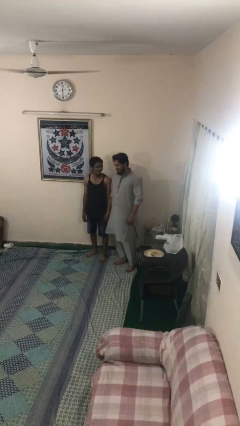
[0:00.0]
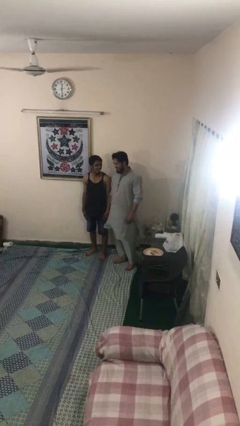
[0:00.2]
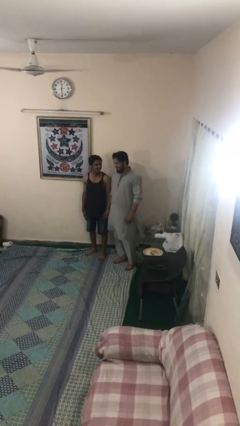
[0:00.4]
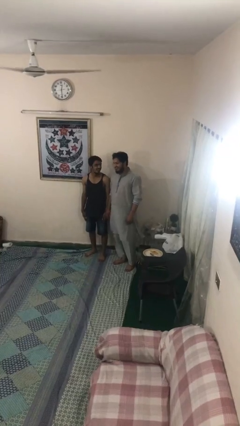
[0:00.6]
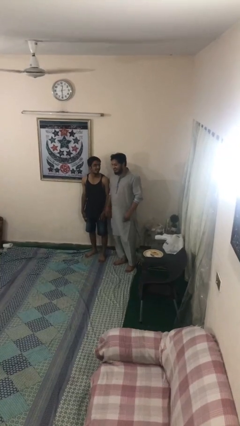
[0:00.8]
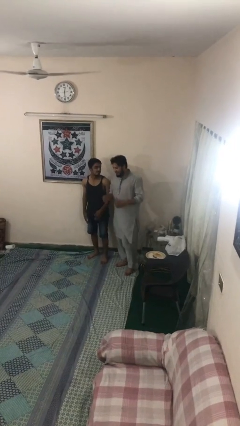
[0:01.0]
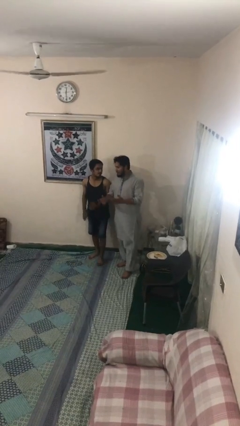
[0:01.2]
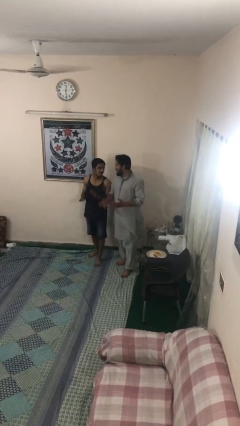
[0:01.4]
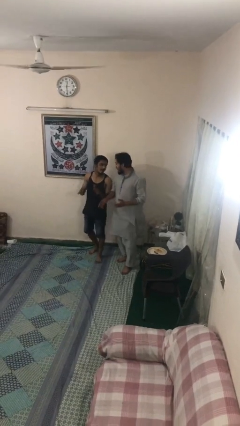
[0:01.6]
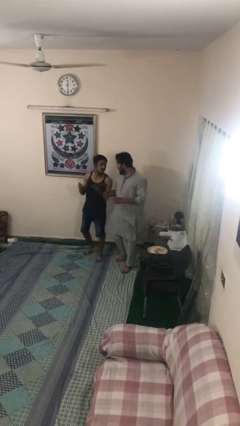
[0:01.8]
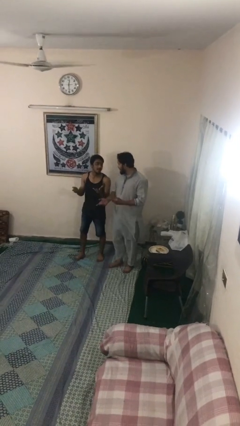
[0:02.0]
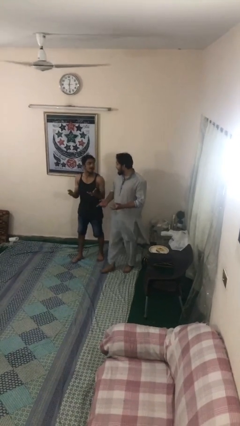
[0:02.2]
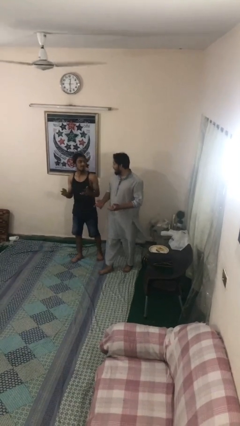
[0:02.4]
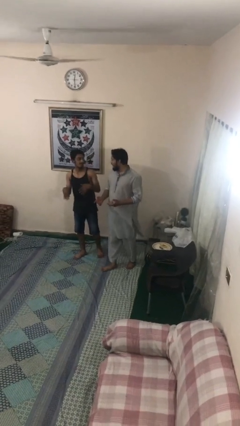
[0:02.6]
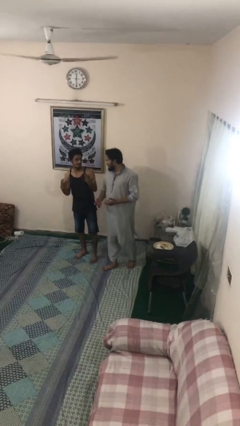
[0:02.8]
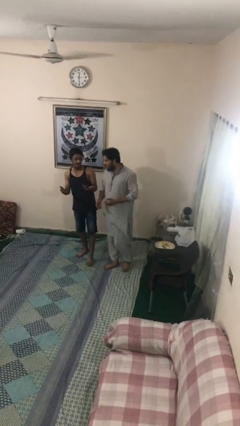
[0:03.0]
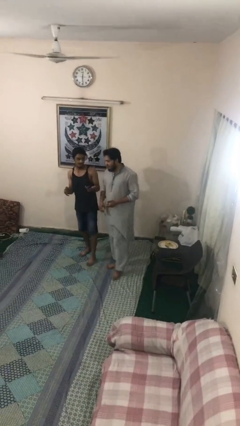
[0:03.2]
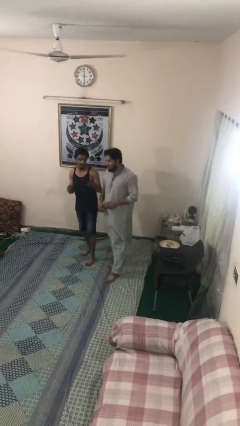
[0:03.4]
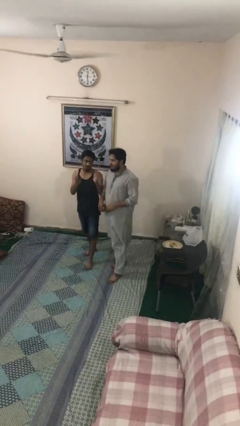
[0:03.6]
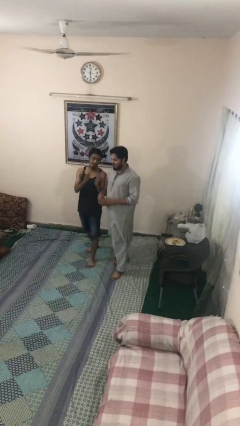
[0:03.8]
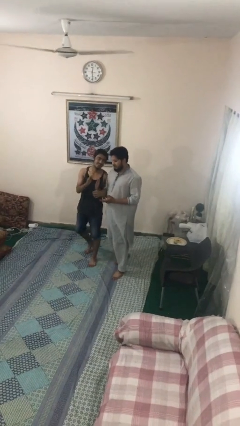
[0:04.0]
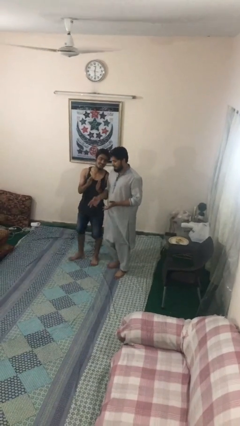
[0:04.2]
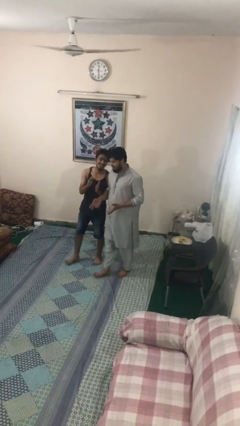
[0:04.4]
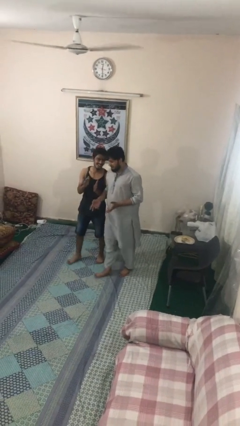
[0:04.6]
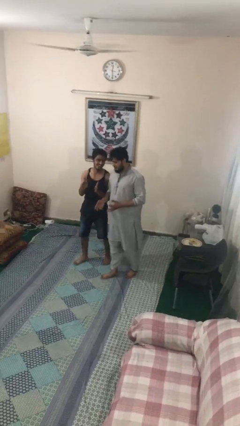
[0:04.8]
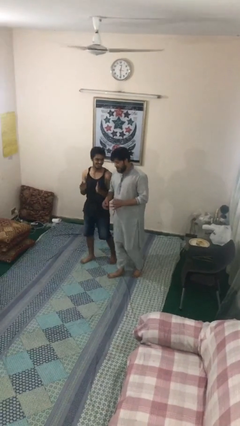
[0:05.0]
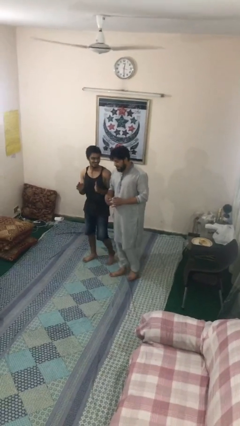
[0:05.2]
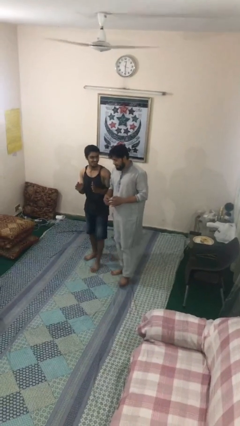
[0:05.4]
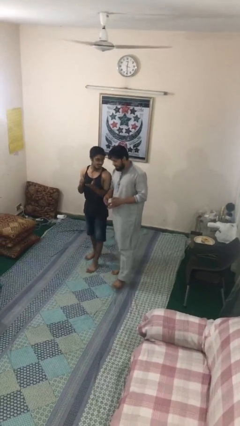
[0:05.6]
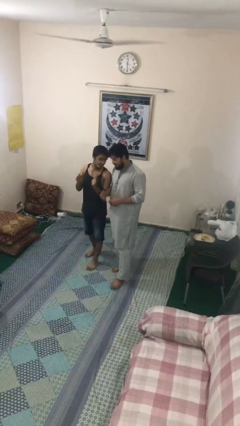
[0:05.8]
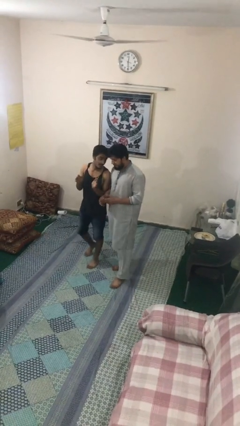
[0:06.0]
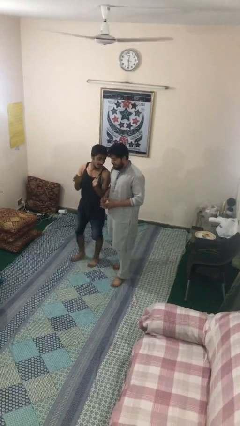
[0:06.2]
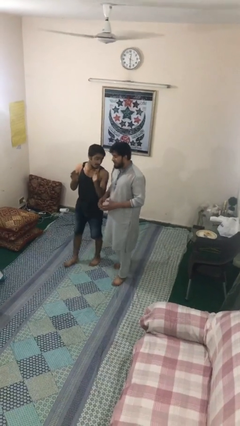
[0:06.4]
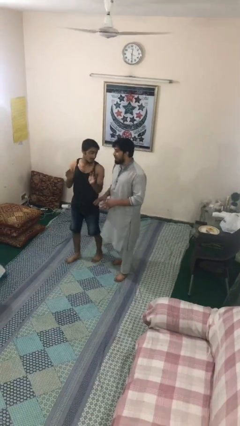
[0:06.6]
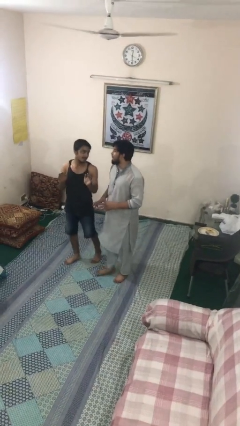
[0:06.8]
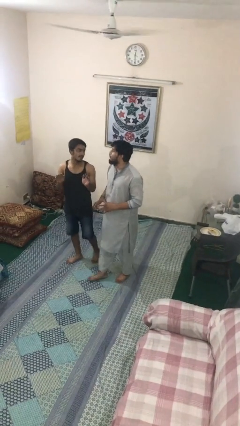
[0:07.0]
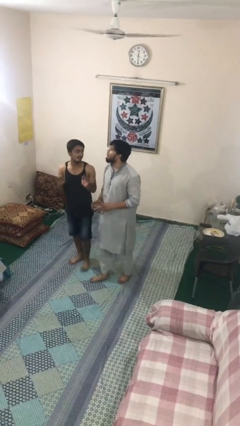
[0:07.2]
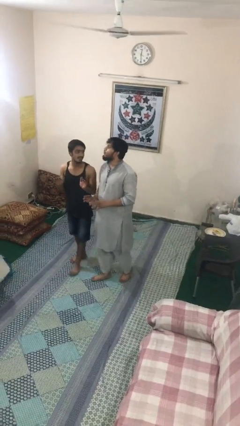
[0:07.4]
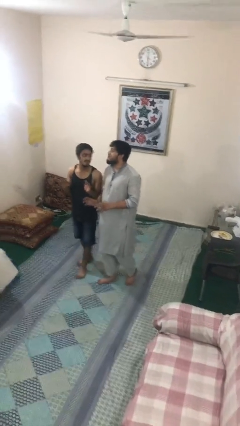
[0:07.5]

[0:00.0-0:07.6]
person talks to person

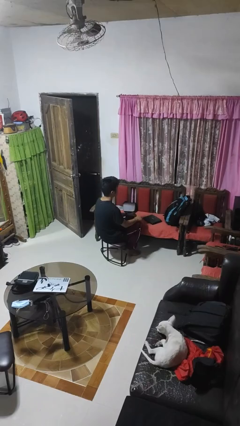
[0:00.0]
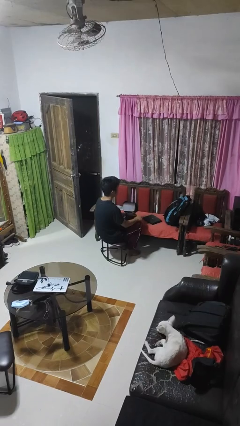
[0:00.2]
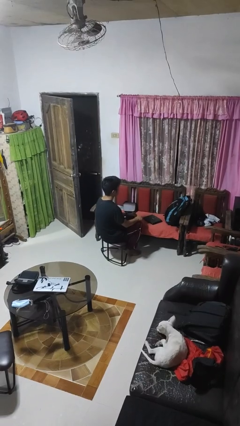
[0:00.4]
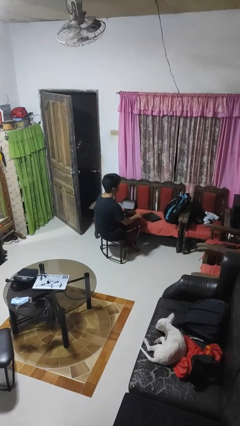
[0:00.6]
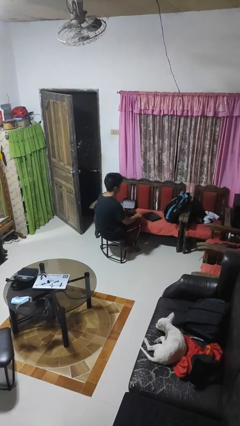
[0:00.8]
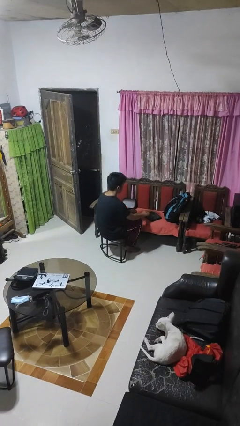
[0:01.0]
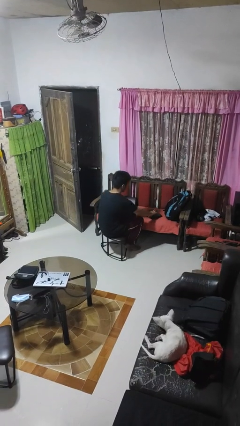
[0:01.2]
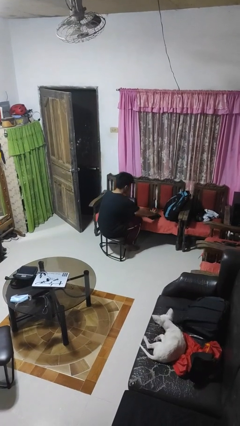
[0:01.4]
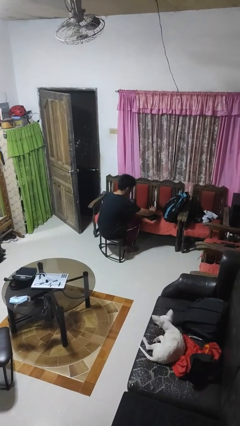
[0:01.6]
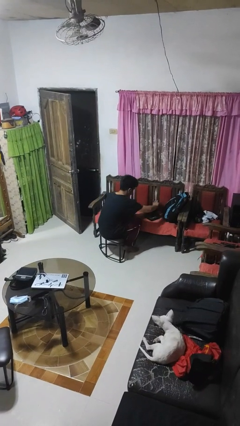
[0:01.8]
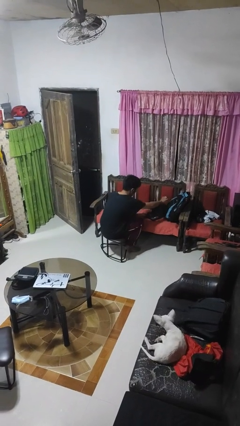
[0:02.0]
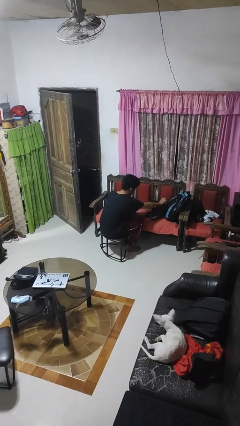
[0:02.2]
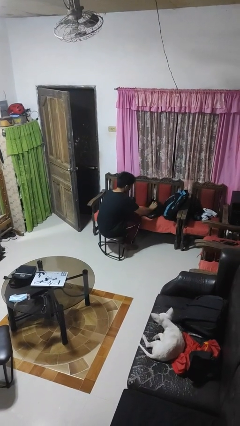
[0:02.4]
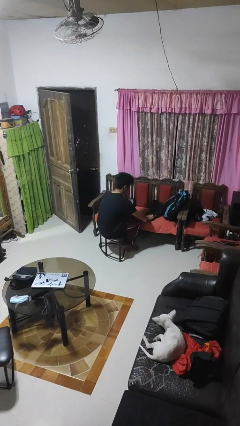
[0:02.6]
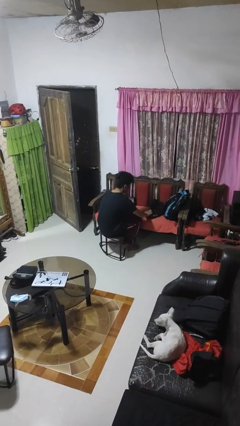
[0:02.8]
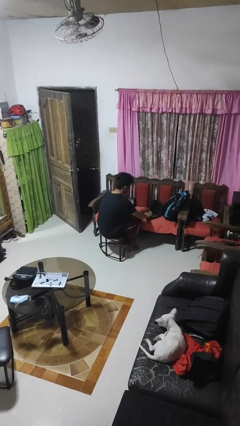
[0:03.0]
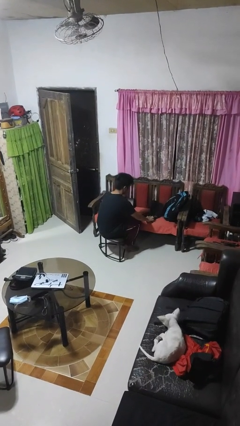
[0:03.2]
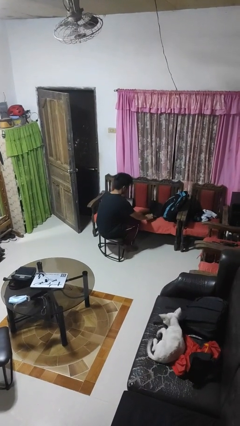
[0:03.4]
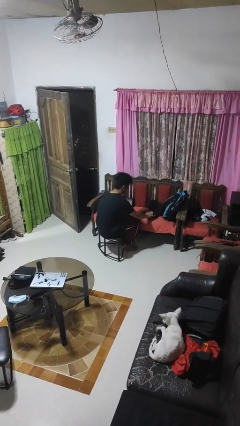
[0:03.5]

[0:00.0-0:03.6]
person opens laptop

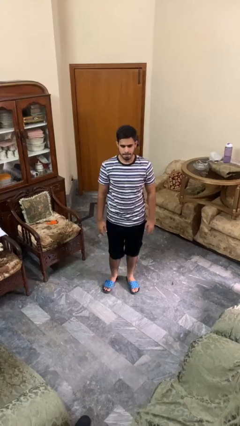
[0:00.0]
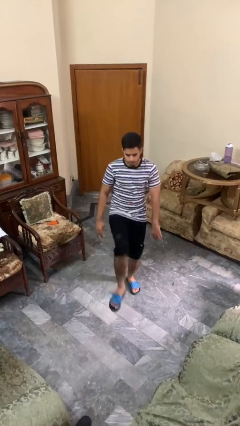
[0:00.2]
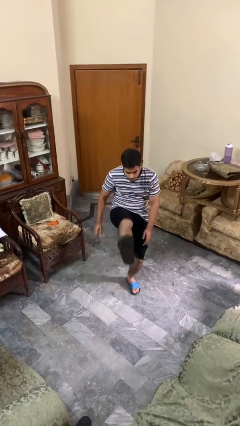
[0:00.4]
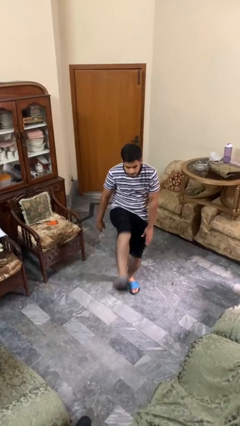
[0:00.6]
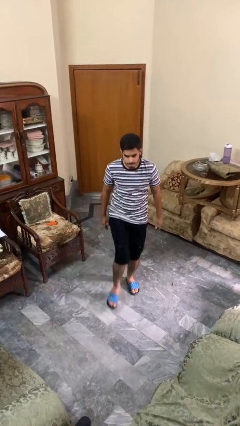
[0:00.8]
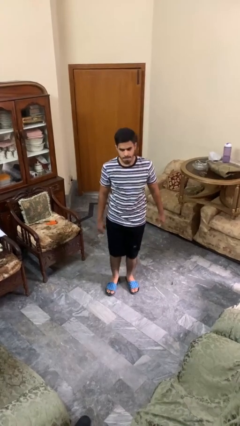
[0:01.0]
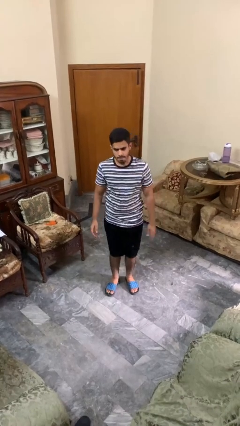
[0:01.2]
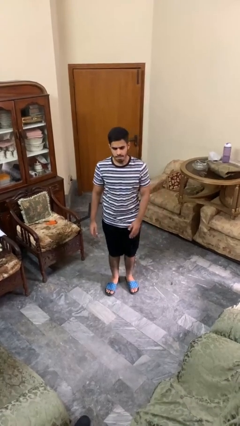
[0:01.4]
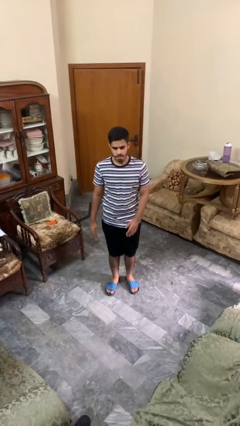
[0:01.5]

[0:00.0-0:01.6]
person karate kicks

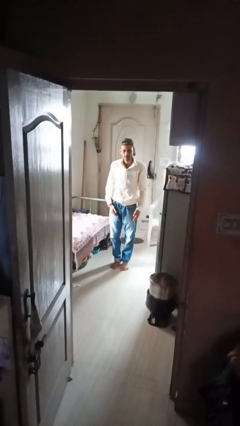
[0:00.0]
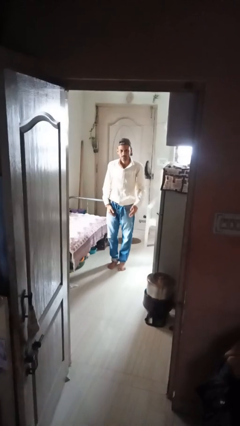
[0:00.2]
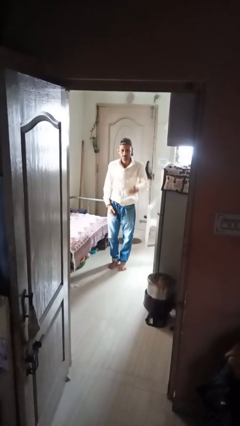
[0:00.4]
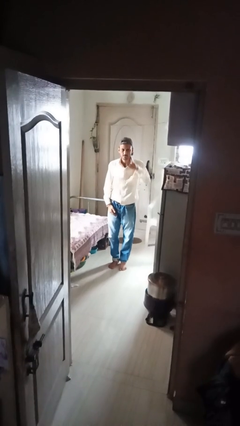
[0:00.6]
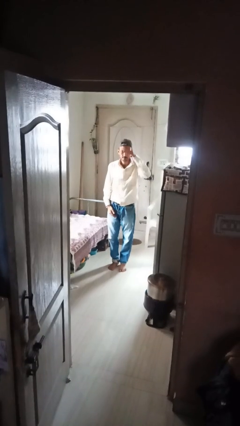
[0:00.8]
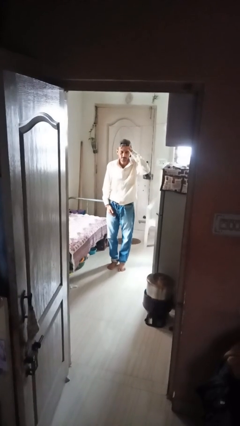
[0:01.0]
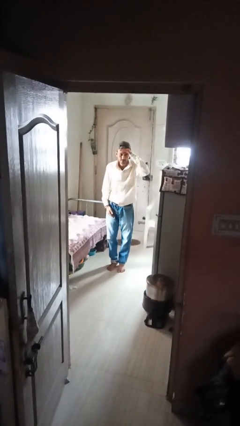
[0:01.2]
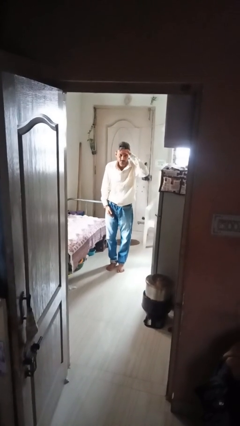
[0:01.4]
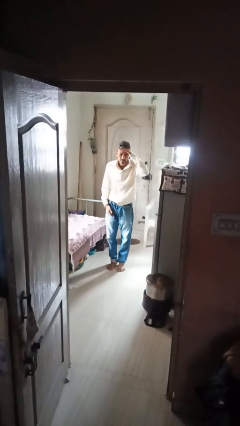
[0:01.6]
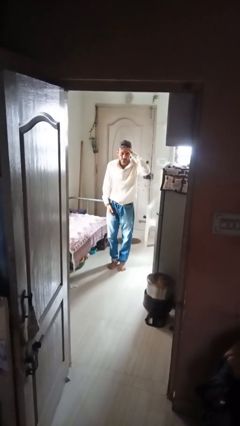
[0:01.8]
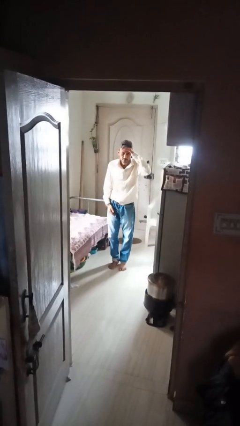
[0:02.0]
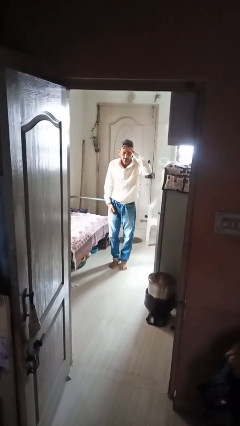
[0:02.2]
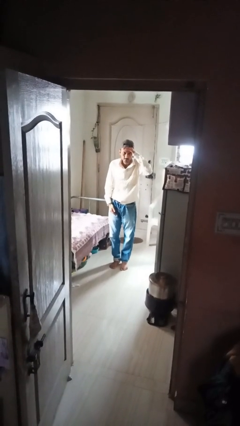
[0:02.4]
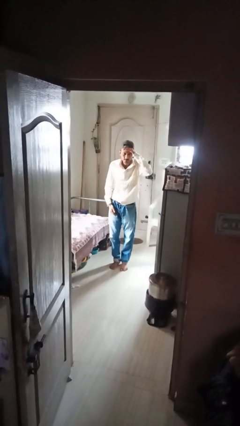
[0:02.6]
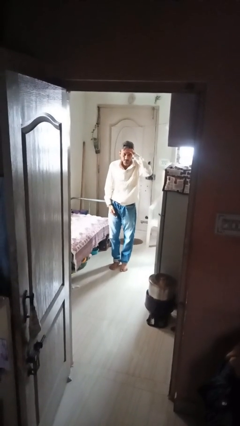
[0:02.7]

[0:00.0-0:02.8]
person shades eyes

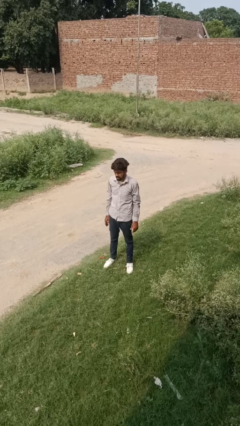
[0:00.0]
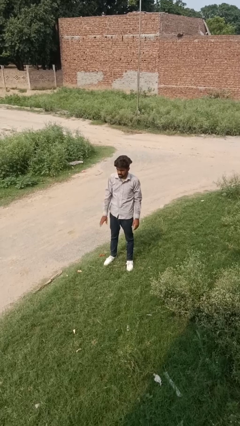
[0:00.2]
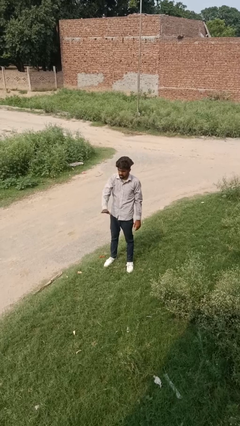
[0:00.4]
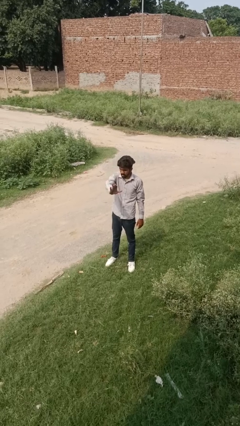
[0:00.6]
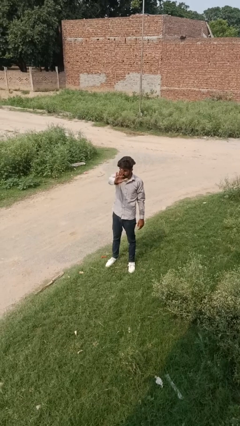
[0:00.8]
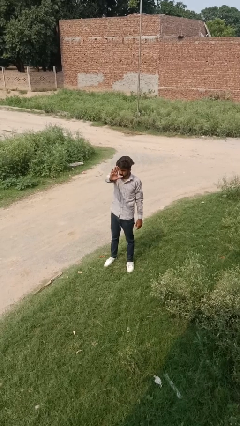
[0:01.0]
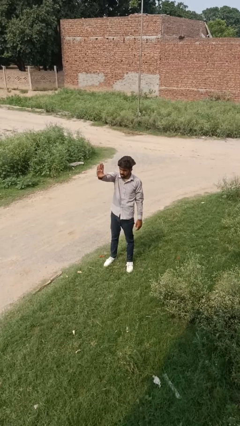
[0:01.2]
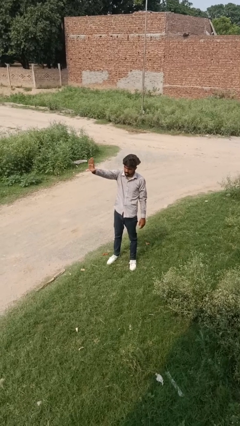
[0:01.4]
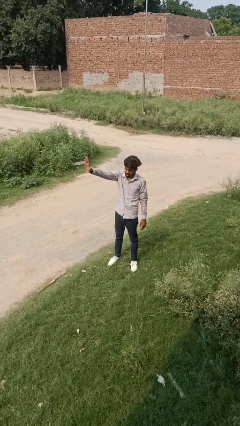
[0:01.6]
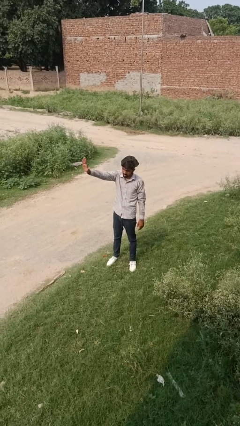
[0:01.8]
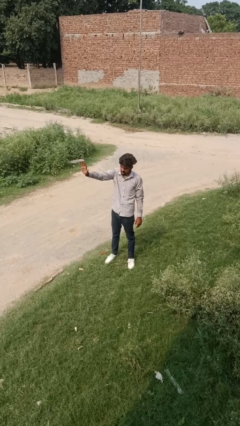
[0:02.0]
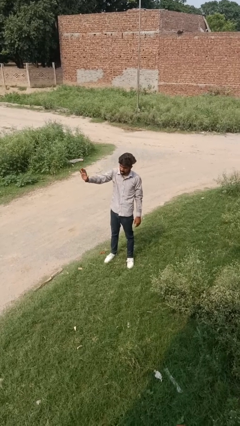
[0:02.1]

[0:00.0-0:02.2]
person gestures swipe right
